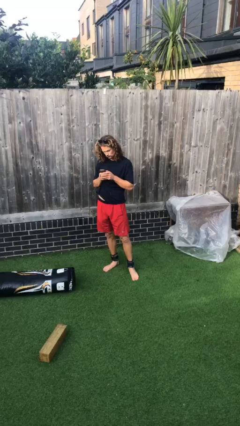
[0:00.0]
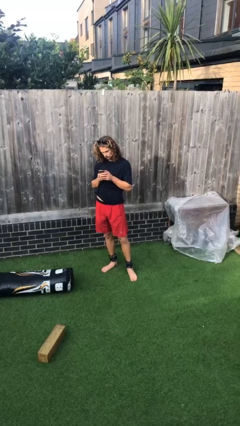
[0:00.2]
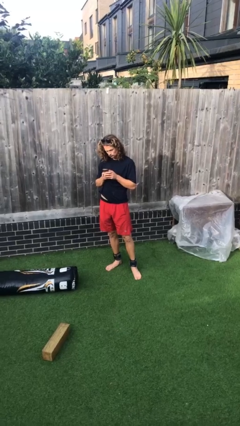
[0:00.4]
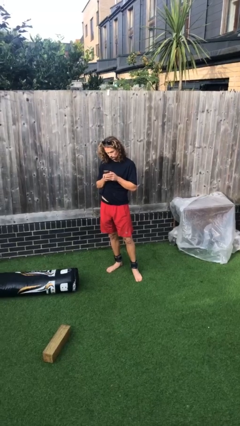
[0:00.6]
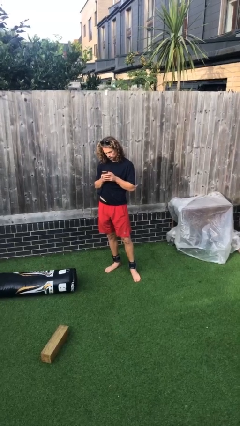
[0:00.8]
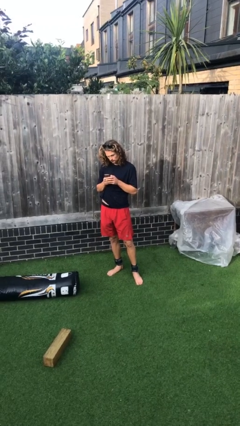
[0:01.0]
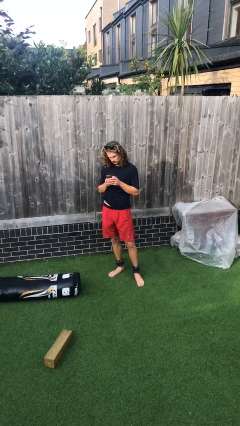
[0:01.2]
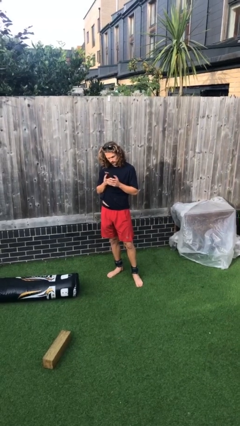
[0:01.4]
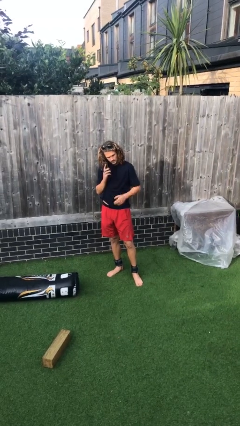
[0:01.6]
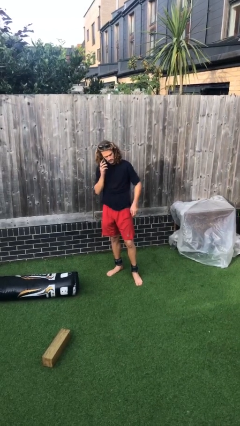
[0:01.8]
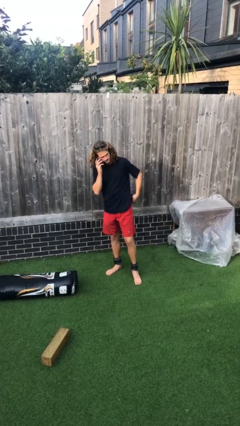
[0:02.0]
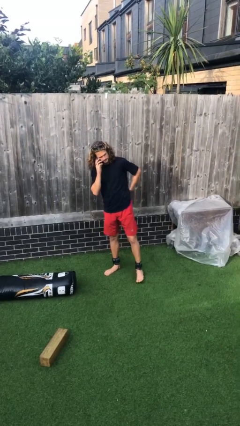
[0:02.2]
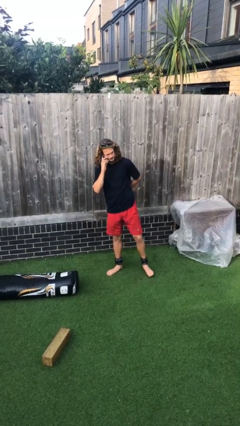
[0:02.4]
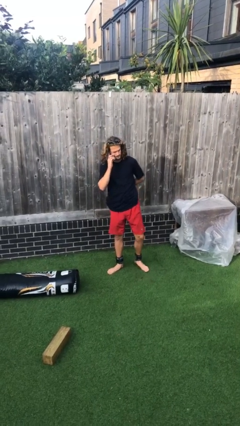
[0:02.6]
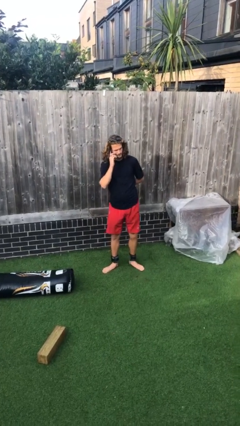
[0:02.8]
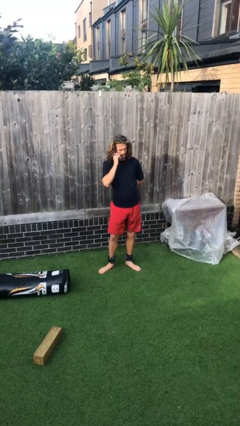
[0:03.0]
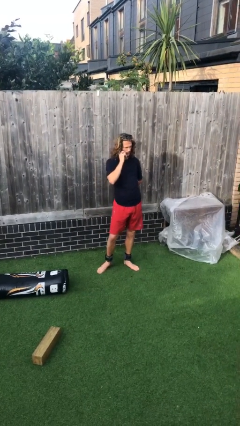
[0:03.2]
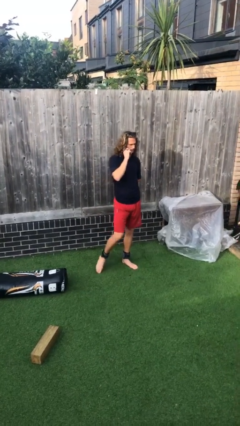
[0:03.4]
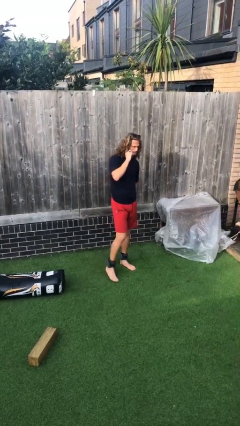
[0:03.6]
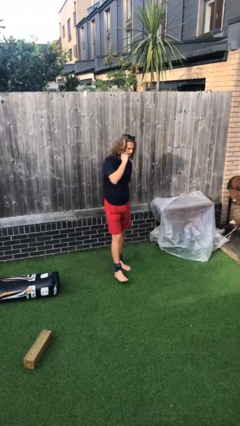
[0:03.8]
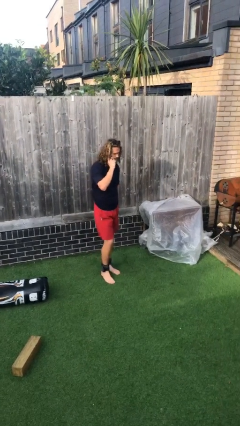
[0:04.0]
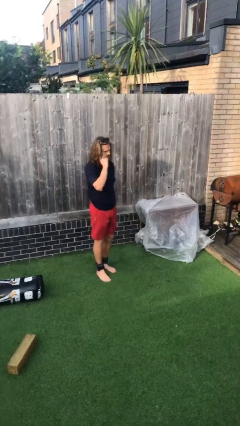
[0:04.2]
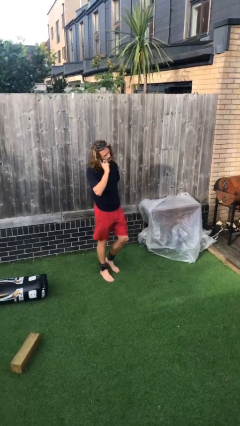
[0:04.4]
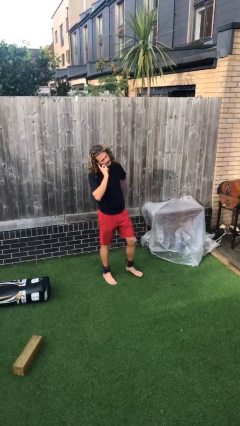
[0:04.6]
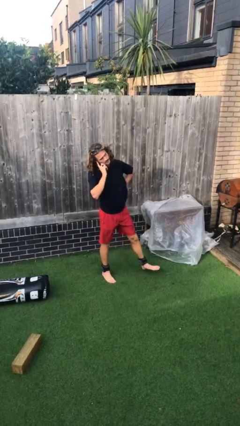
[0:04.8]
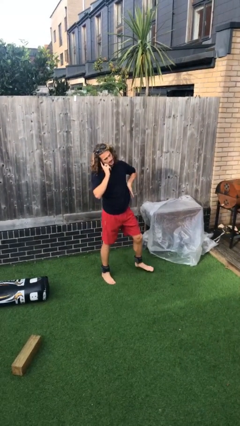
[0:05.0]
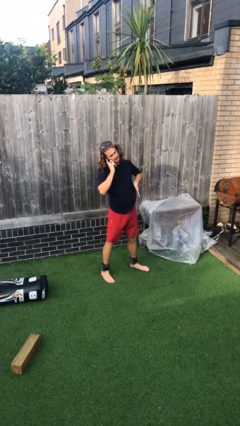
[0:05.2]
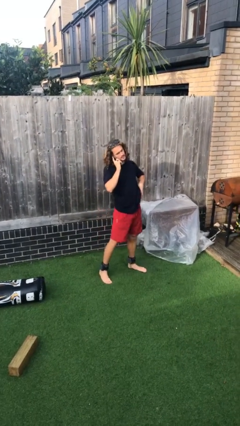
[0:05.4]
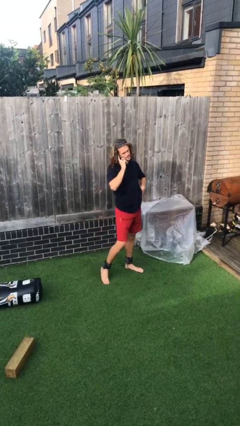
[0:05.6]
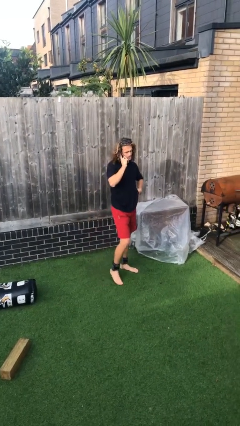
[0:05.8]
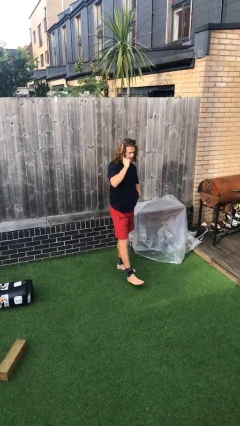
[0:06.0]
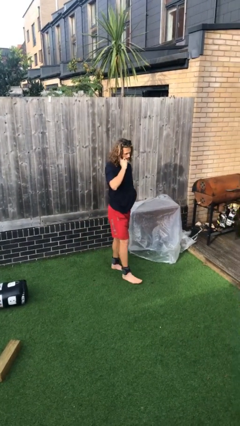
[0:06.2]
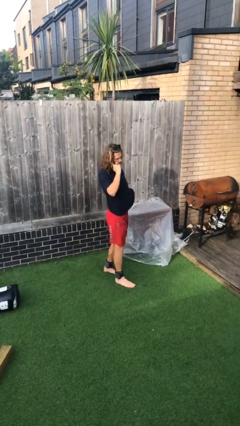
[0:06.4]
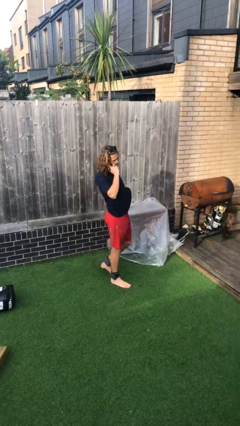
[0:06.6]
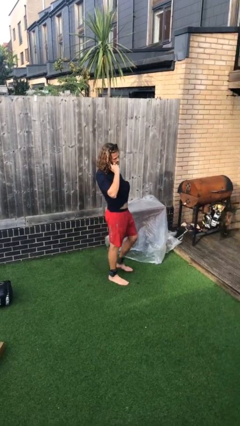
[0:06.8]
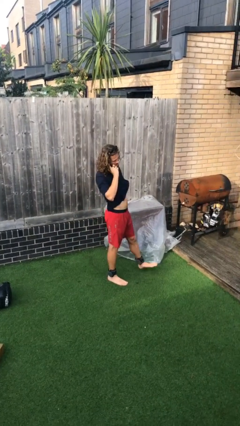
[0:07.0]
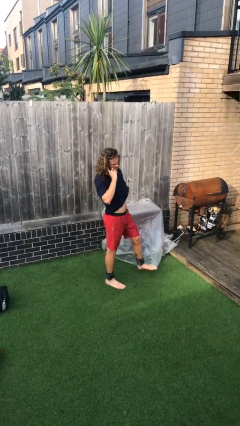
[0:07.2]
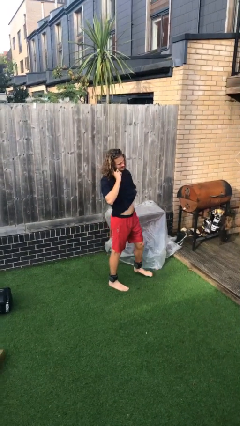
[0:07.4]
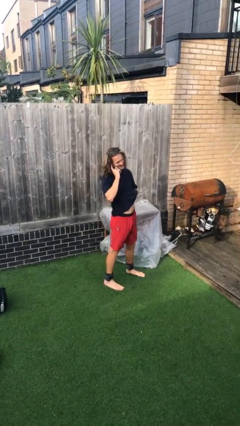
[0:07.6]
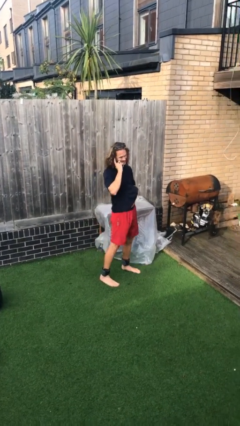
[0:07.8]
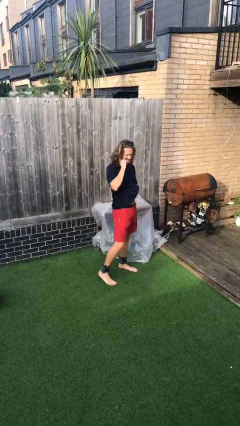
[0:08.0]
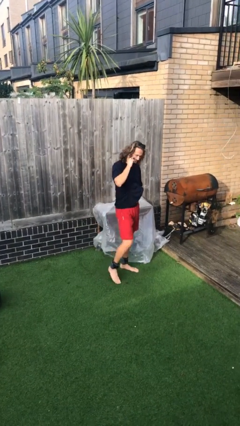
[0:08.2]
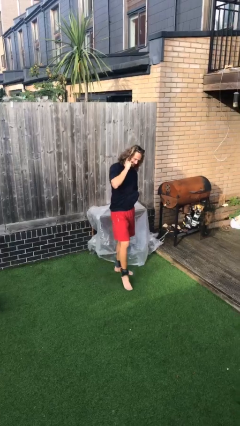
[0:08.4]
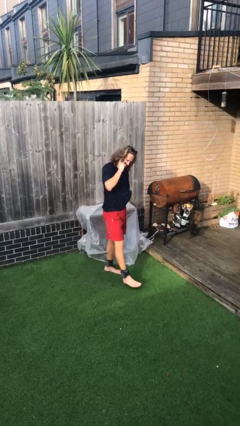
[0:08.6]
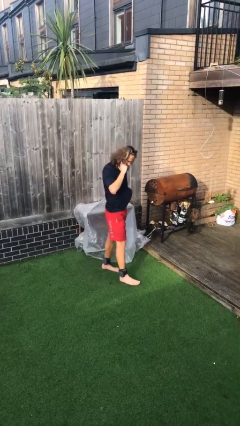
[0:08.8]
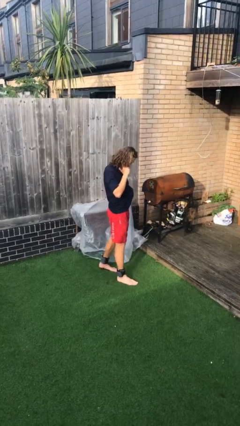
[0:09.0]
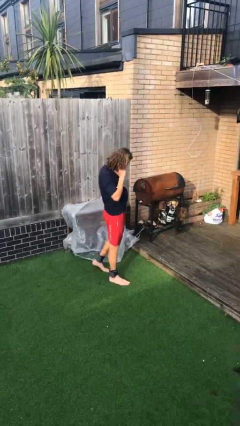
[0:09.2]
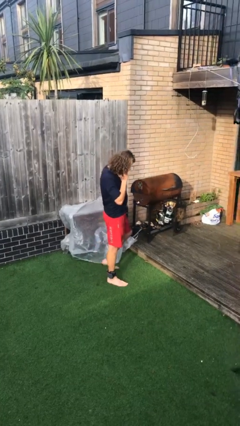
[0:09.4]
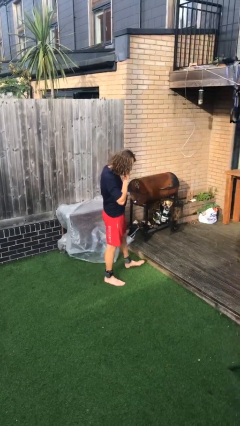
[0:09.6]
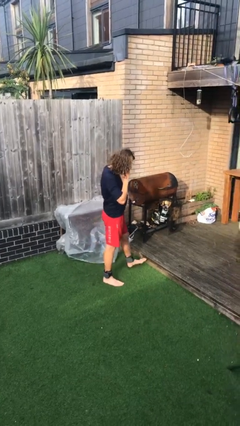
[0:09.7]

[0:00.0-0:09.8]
person talks on phone

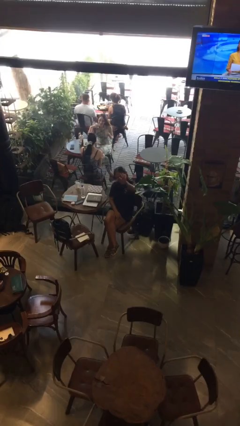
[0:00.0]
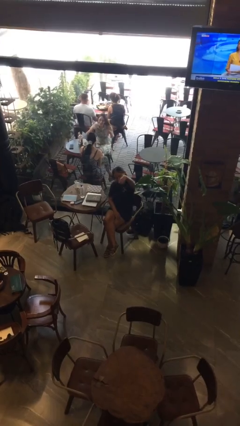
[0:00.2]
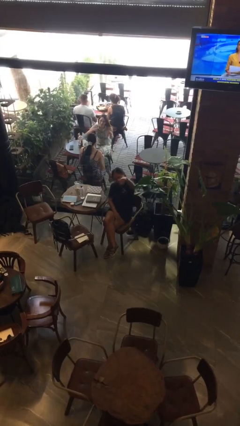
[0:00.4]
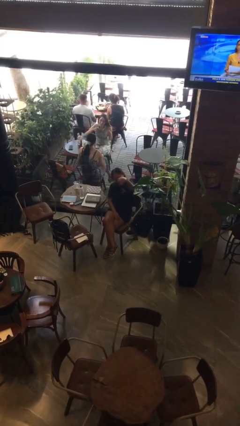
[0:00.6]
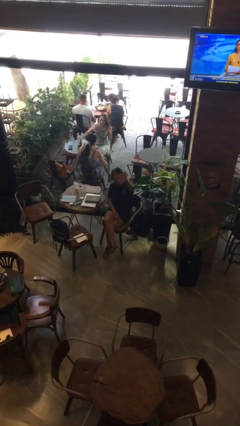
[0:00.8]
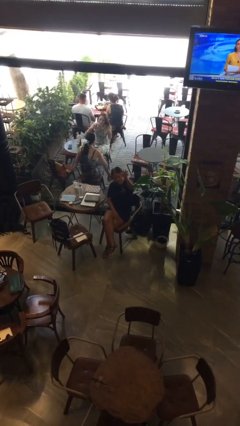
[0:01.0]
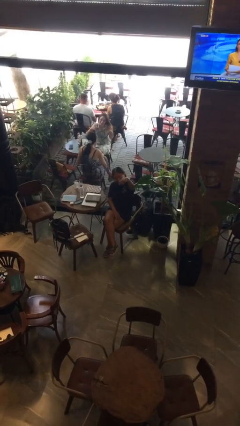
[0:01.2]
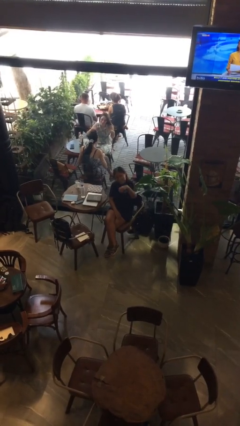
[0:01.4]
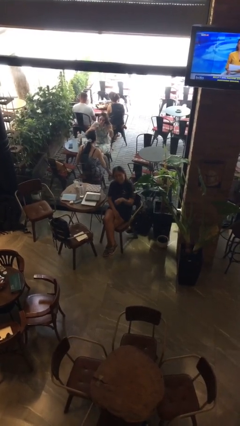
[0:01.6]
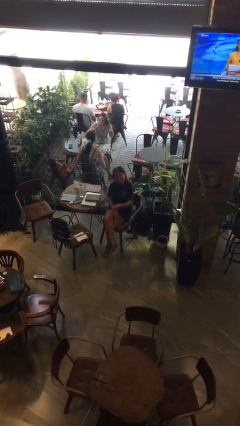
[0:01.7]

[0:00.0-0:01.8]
person gestures come here

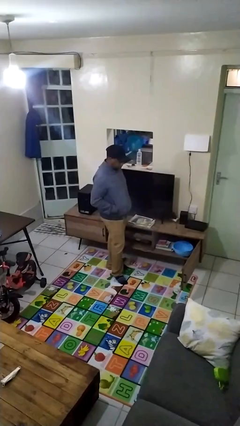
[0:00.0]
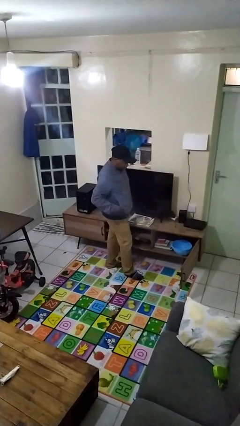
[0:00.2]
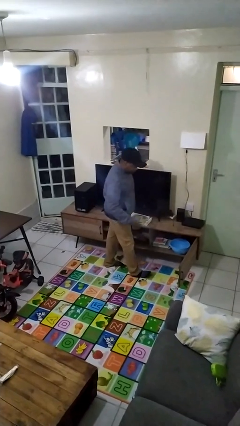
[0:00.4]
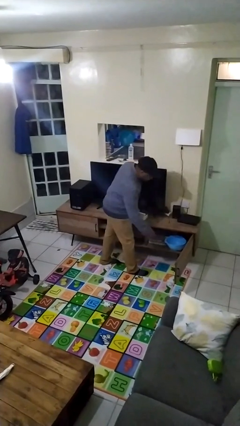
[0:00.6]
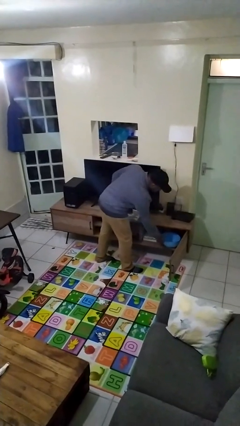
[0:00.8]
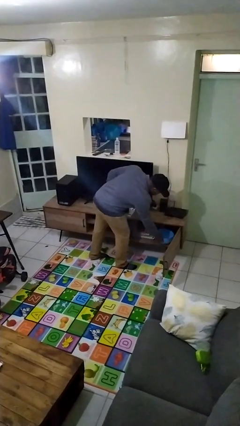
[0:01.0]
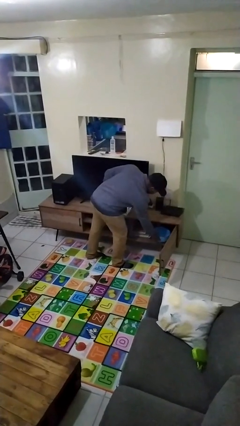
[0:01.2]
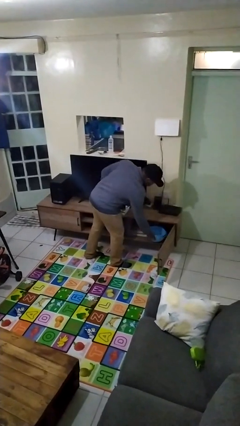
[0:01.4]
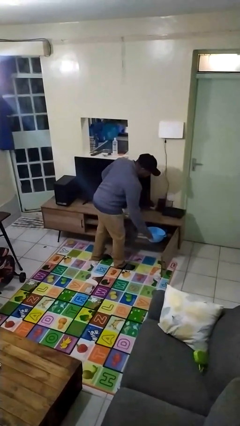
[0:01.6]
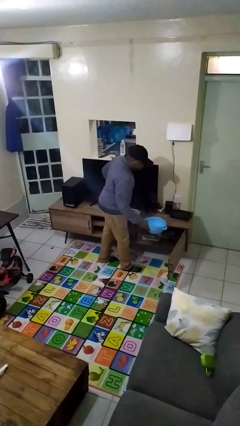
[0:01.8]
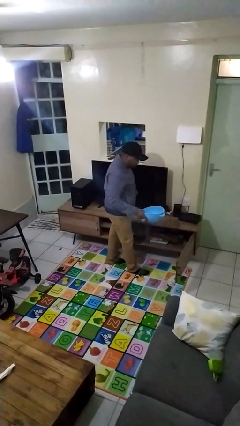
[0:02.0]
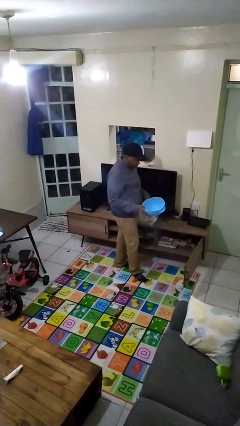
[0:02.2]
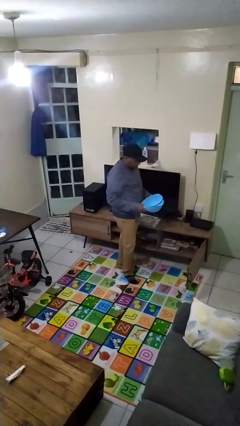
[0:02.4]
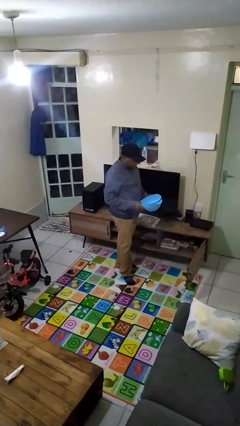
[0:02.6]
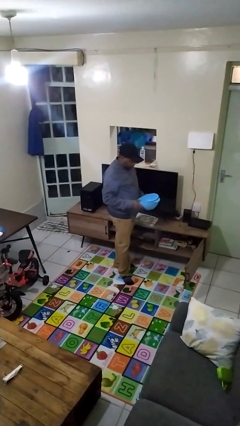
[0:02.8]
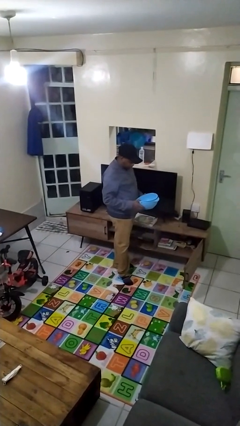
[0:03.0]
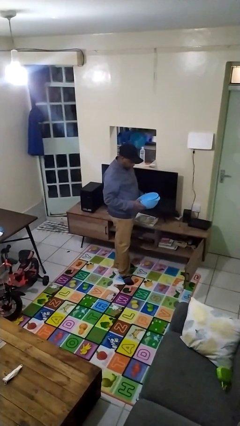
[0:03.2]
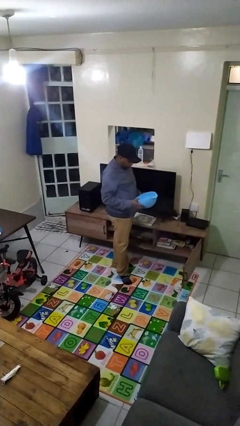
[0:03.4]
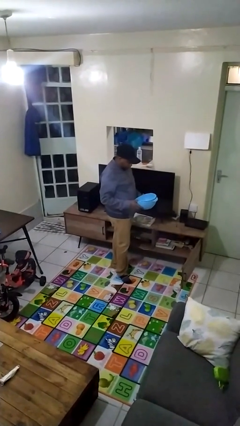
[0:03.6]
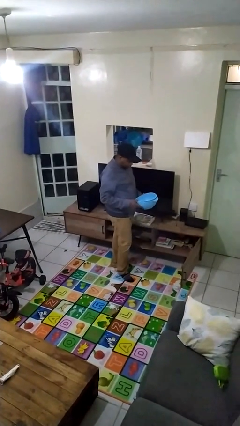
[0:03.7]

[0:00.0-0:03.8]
person picks up object from cabinet

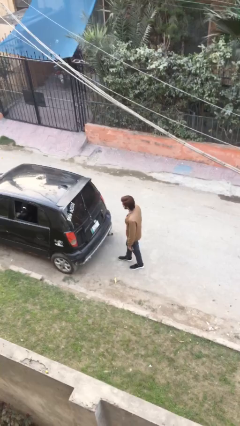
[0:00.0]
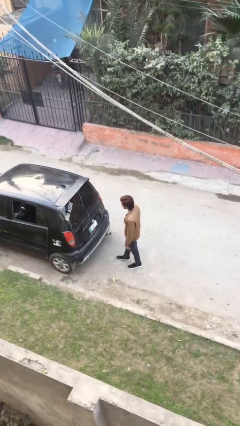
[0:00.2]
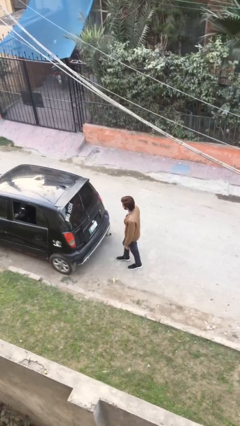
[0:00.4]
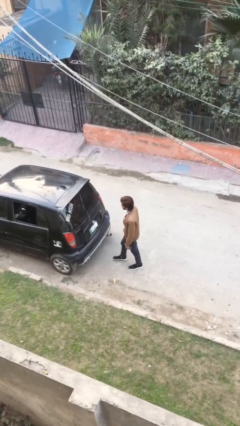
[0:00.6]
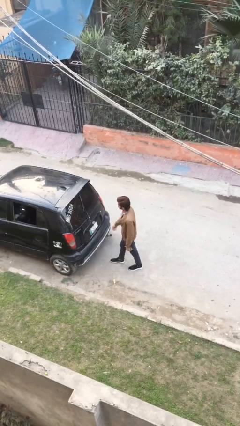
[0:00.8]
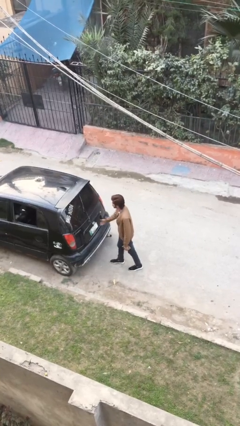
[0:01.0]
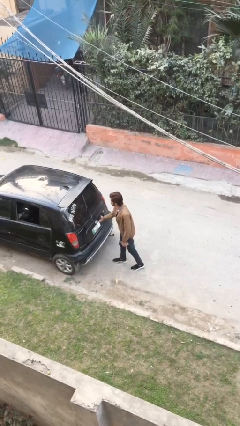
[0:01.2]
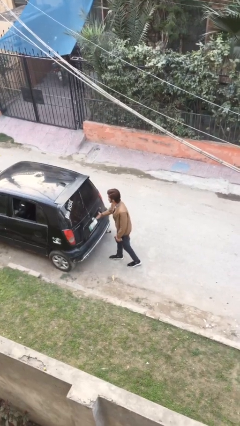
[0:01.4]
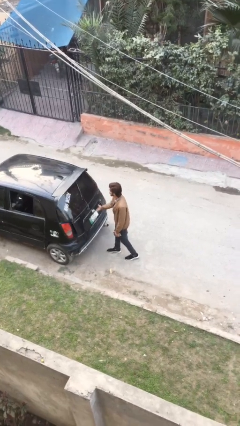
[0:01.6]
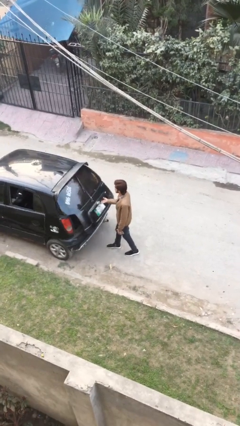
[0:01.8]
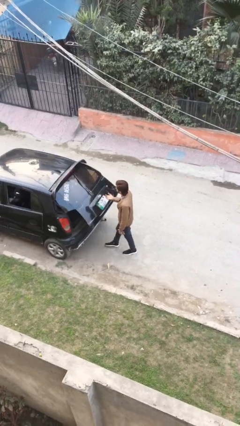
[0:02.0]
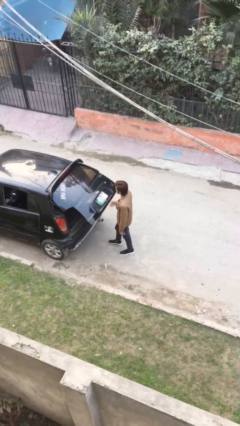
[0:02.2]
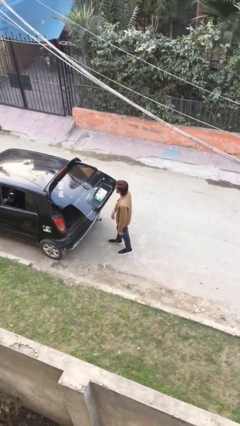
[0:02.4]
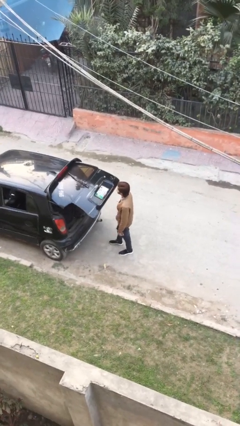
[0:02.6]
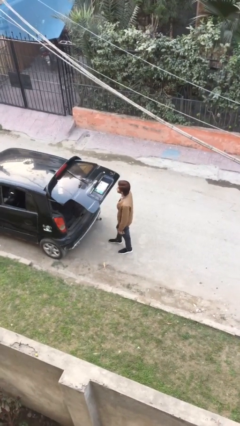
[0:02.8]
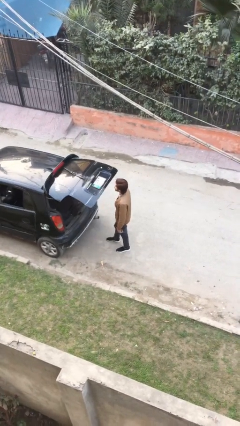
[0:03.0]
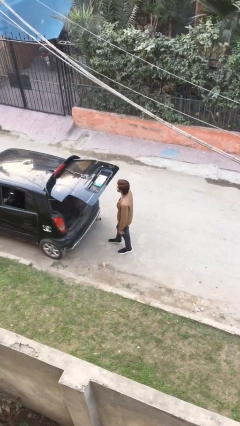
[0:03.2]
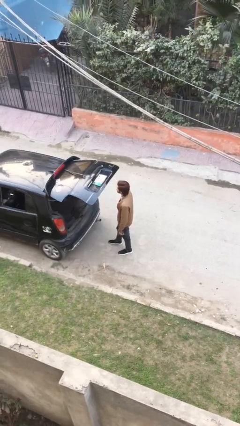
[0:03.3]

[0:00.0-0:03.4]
person opens car trunk
